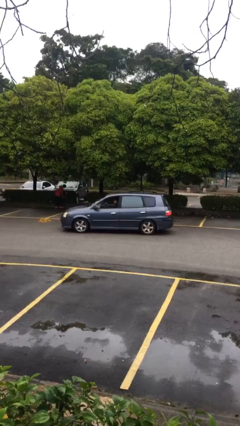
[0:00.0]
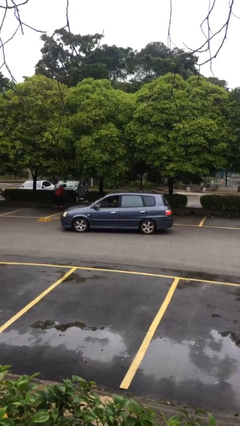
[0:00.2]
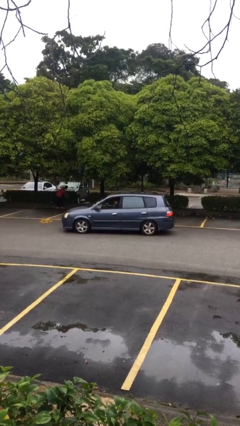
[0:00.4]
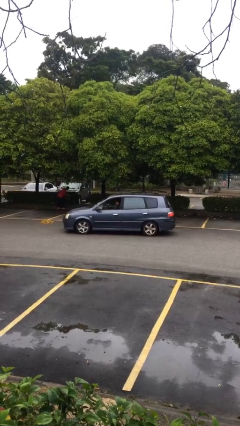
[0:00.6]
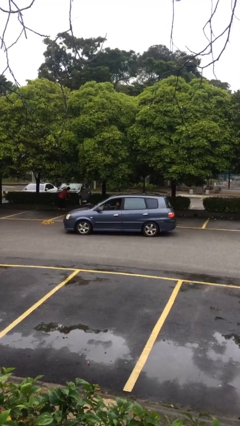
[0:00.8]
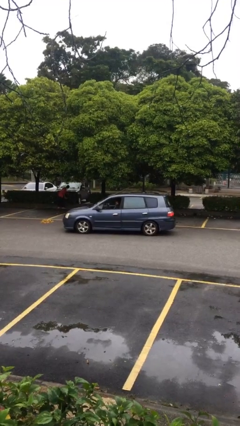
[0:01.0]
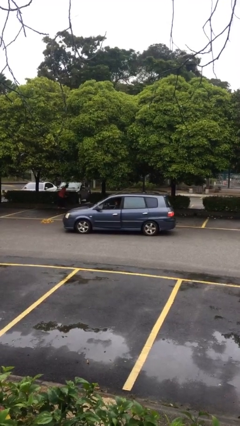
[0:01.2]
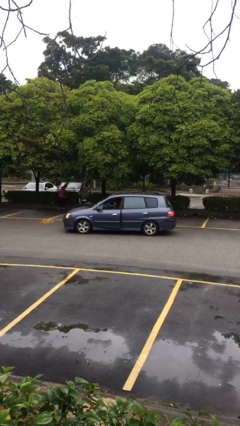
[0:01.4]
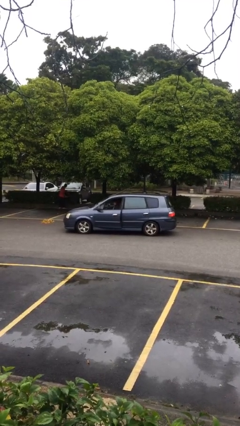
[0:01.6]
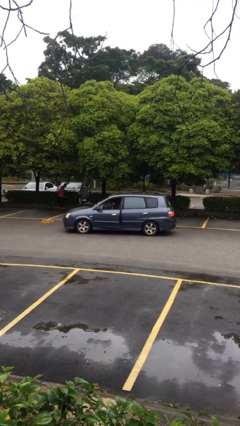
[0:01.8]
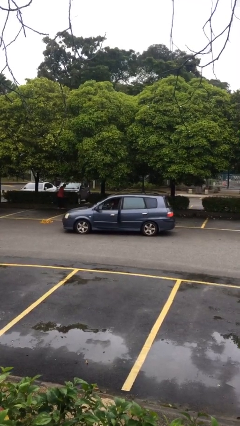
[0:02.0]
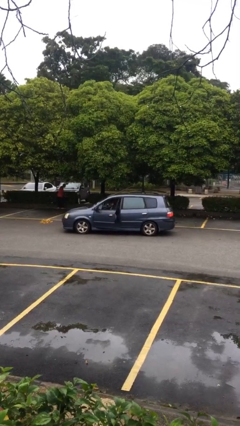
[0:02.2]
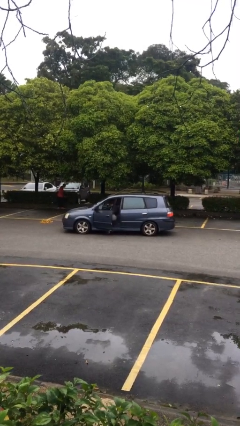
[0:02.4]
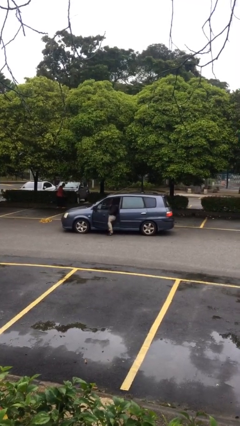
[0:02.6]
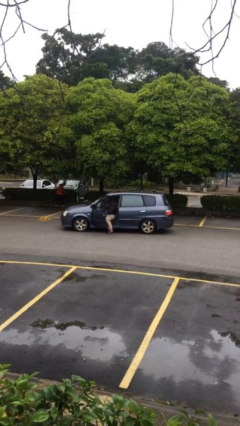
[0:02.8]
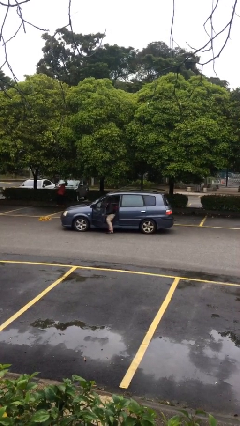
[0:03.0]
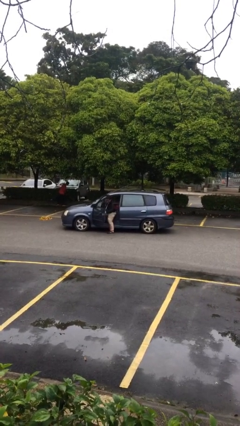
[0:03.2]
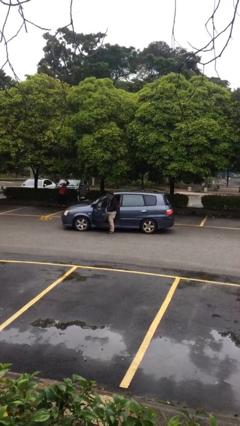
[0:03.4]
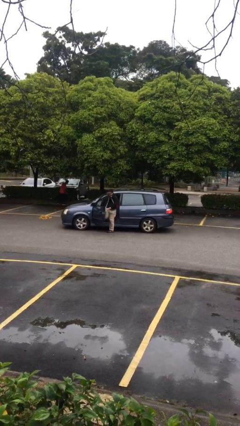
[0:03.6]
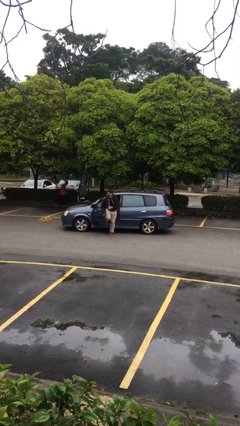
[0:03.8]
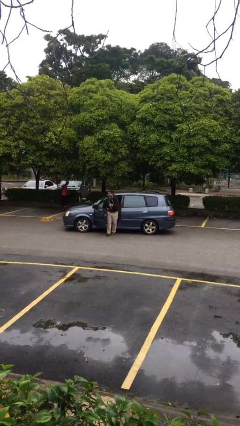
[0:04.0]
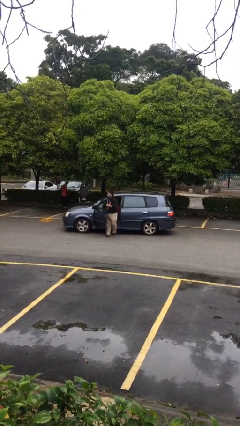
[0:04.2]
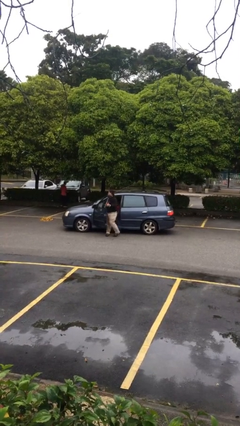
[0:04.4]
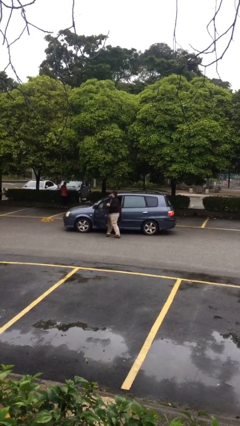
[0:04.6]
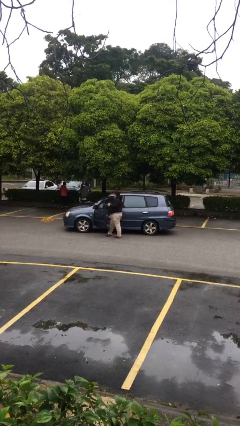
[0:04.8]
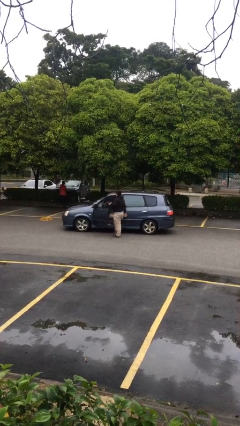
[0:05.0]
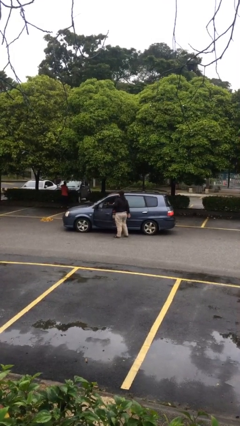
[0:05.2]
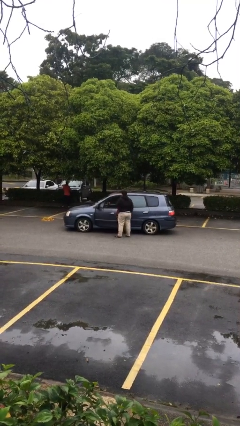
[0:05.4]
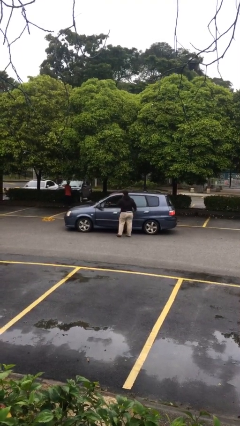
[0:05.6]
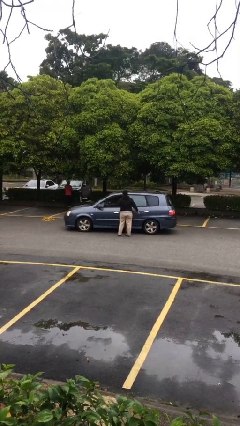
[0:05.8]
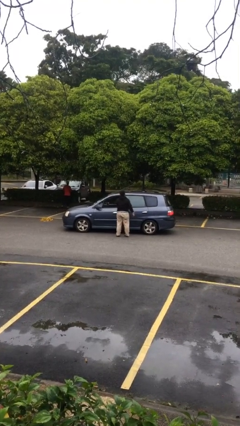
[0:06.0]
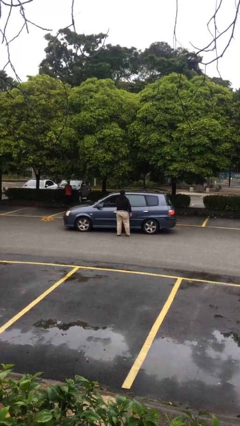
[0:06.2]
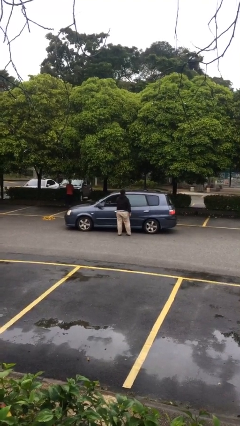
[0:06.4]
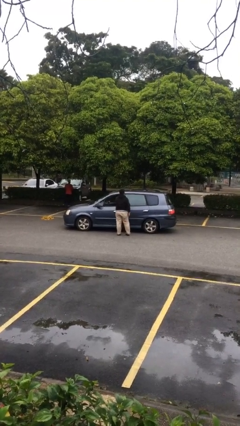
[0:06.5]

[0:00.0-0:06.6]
car drops off person

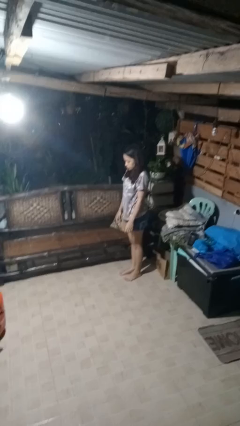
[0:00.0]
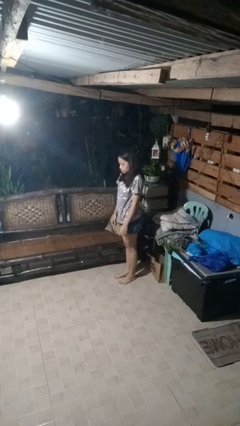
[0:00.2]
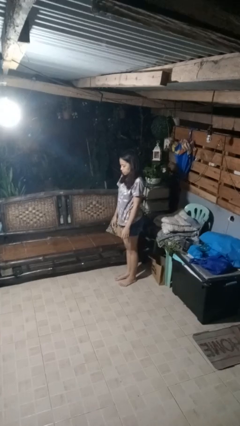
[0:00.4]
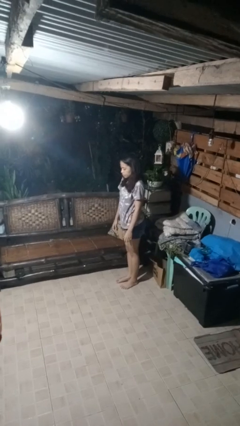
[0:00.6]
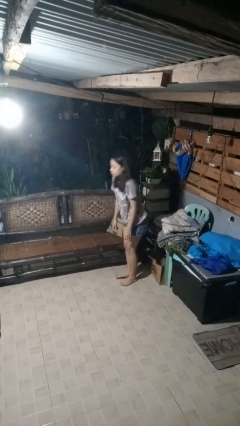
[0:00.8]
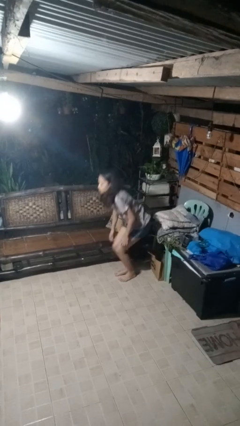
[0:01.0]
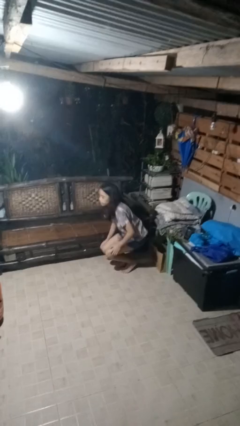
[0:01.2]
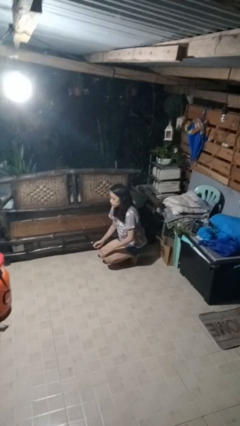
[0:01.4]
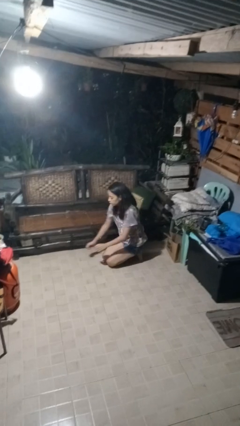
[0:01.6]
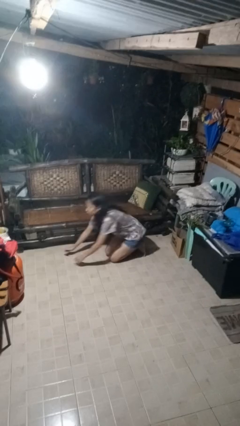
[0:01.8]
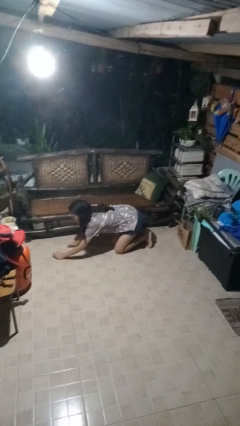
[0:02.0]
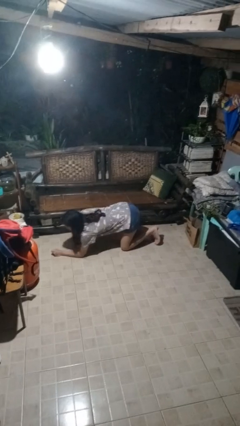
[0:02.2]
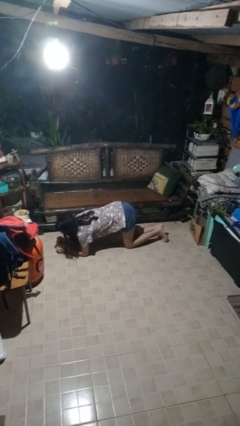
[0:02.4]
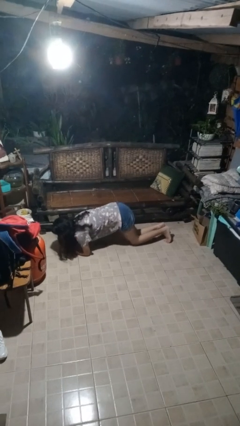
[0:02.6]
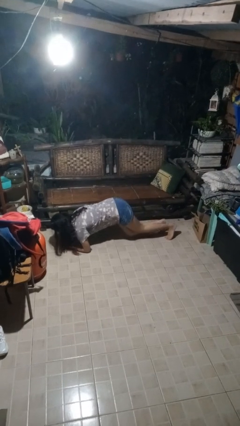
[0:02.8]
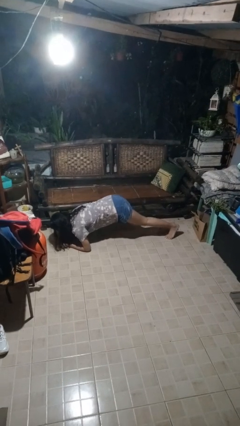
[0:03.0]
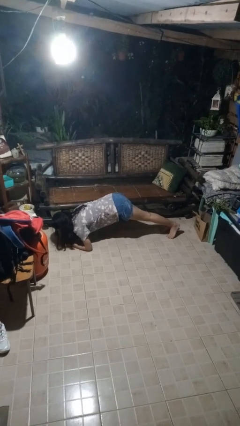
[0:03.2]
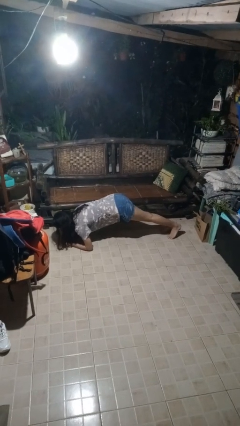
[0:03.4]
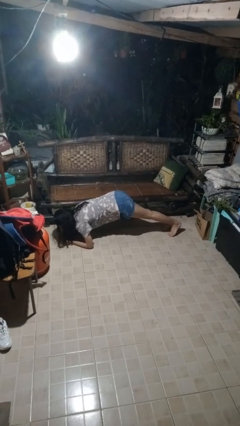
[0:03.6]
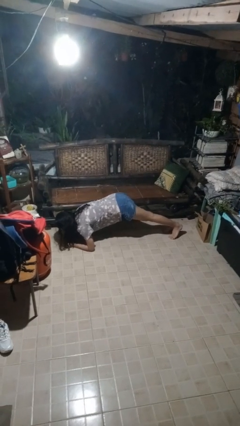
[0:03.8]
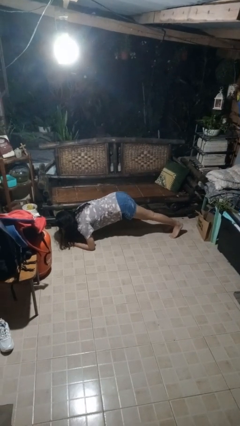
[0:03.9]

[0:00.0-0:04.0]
person exercises with plank

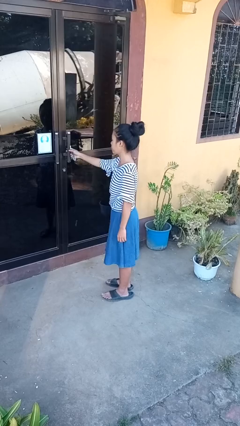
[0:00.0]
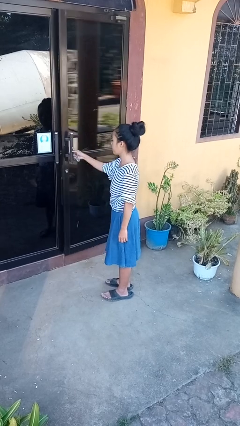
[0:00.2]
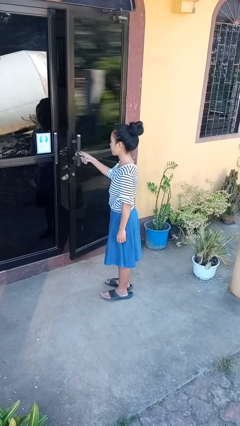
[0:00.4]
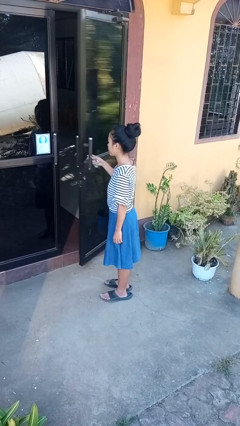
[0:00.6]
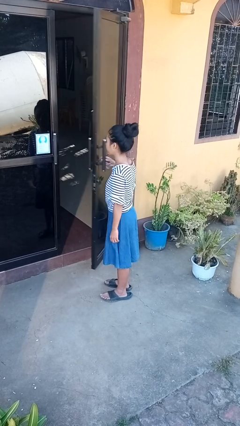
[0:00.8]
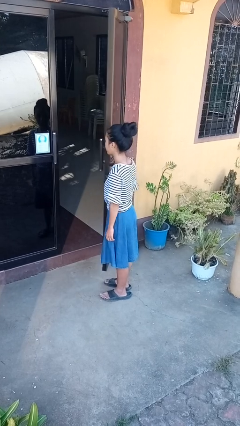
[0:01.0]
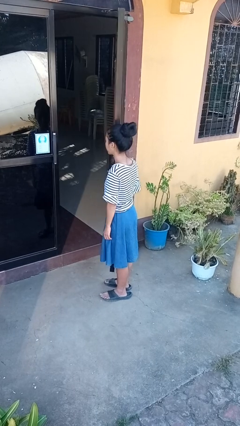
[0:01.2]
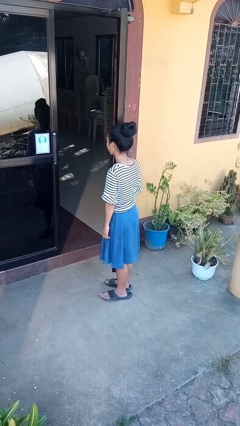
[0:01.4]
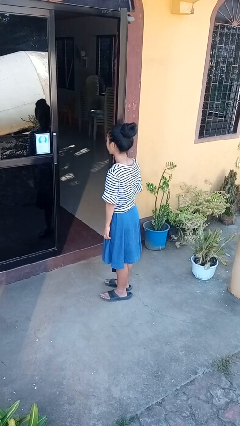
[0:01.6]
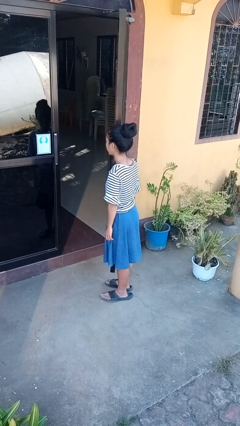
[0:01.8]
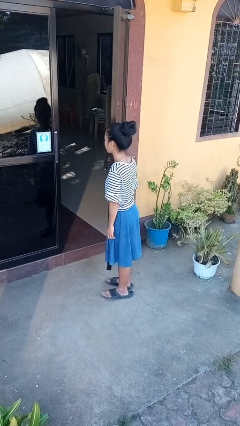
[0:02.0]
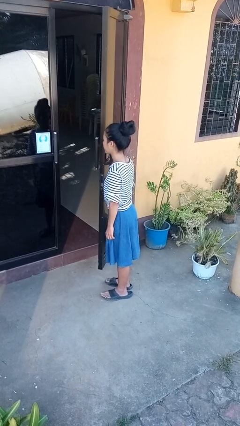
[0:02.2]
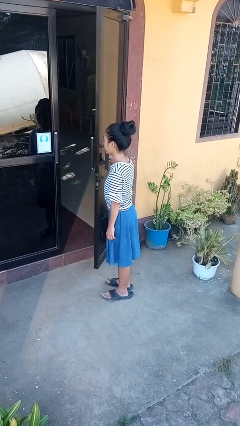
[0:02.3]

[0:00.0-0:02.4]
person opens facility door

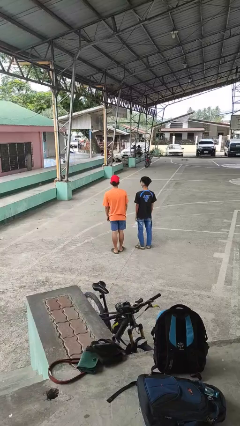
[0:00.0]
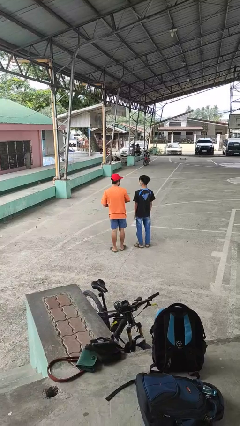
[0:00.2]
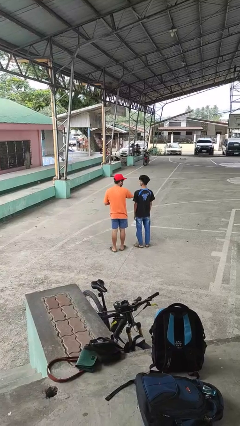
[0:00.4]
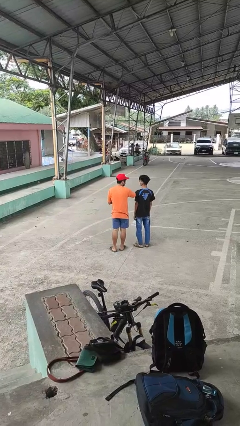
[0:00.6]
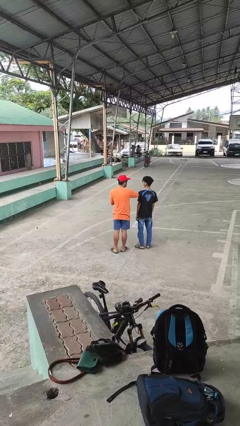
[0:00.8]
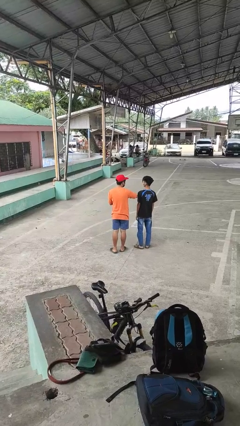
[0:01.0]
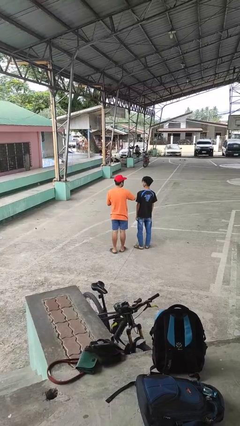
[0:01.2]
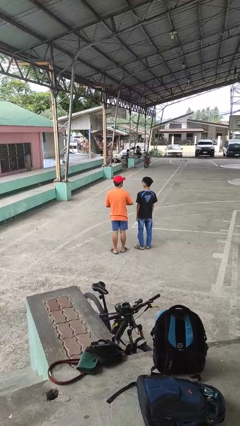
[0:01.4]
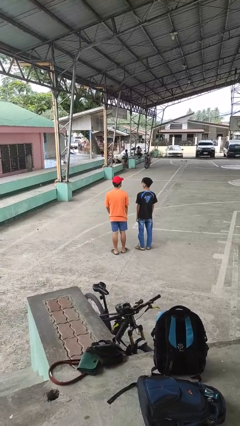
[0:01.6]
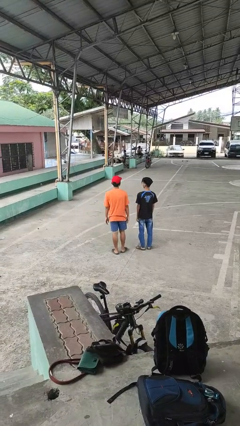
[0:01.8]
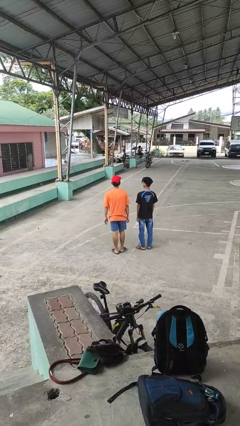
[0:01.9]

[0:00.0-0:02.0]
person nudges person with elbow

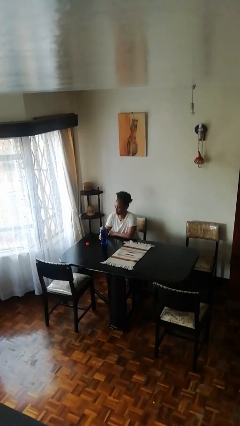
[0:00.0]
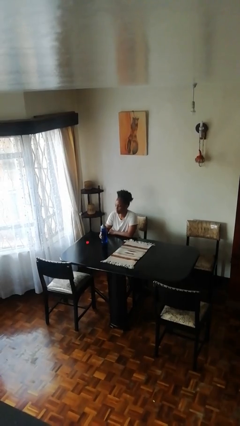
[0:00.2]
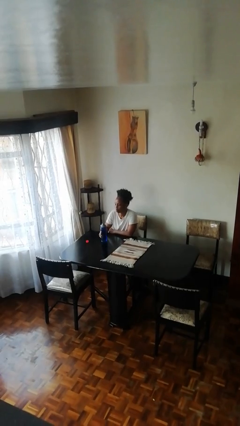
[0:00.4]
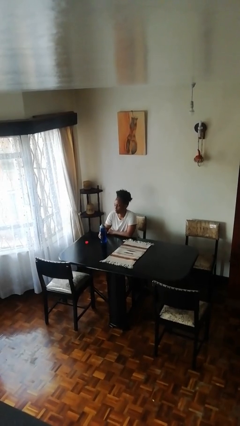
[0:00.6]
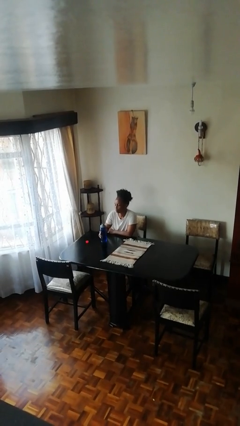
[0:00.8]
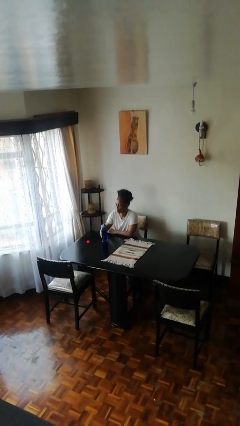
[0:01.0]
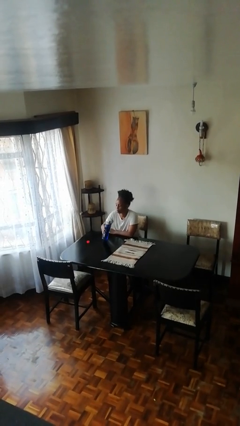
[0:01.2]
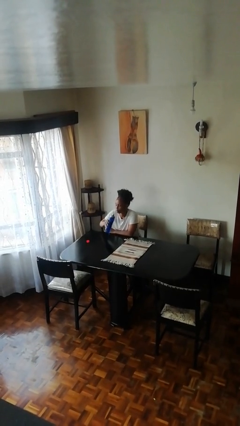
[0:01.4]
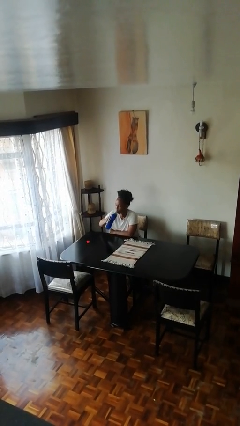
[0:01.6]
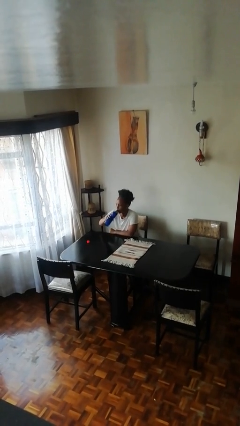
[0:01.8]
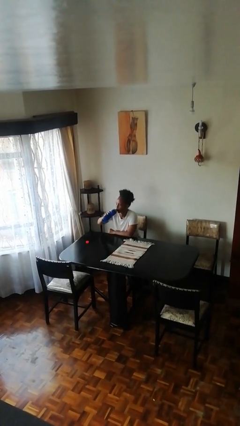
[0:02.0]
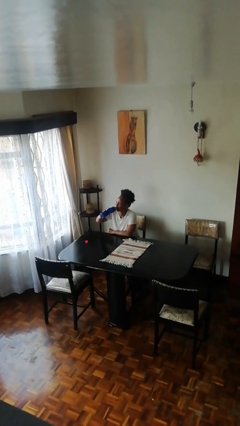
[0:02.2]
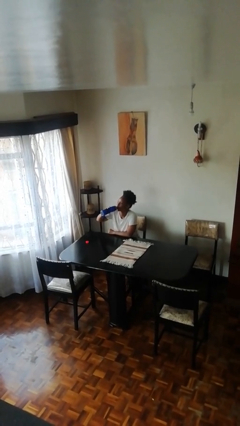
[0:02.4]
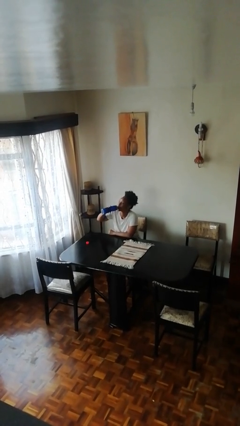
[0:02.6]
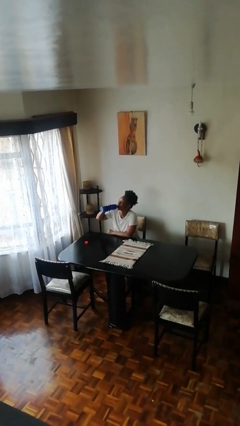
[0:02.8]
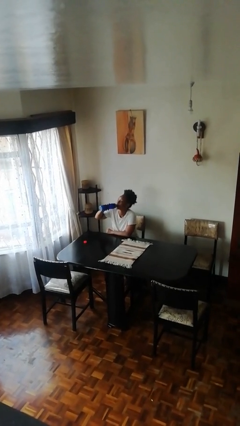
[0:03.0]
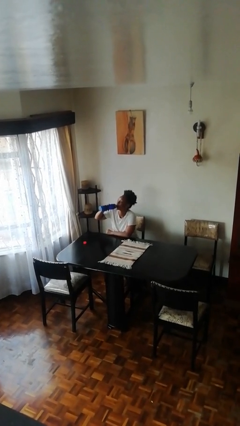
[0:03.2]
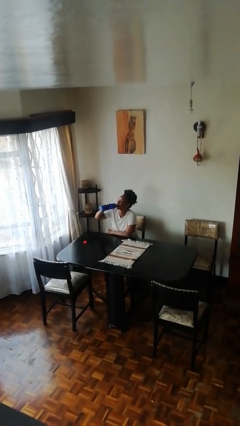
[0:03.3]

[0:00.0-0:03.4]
person drinks from bottle
